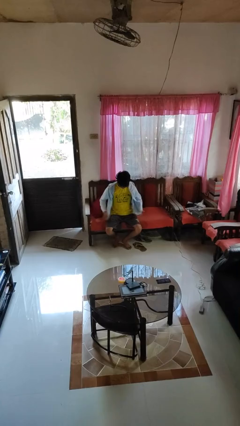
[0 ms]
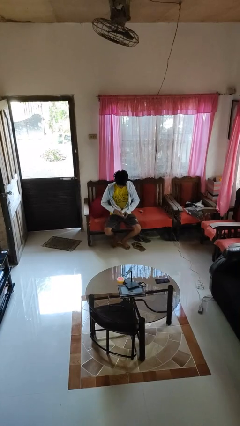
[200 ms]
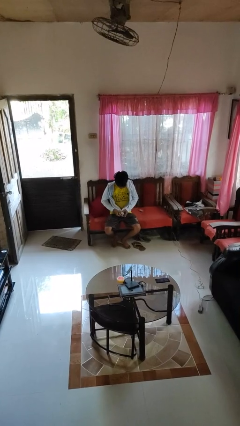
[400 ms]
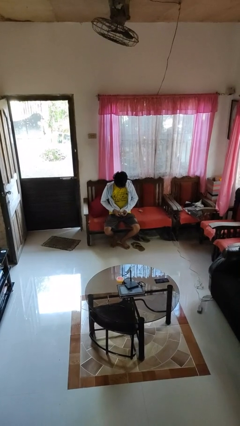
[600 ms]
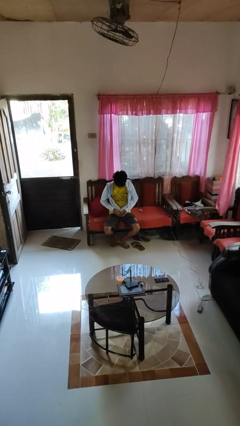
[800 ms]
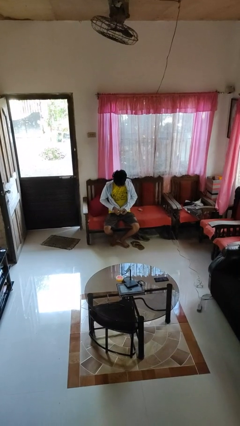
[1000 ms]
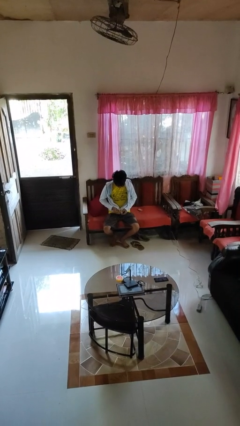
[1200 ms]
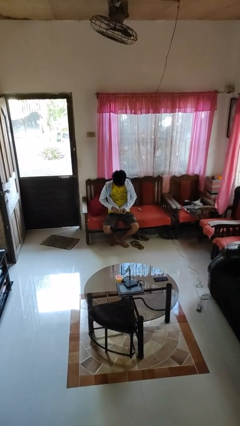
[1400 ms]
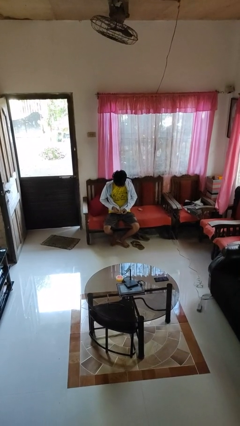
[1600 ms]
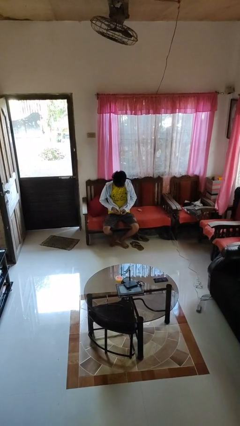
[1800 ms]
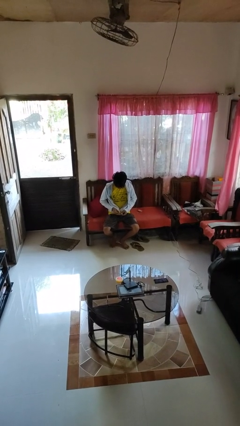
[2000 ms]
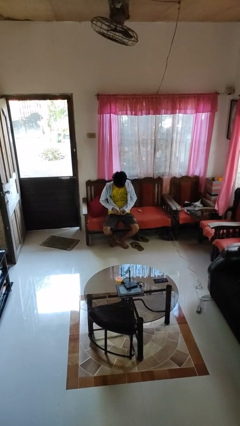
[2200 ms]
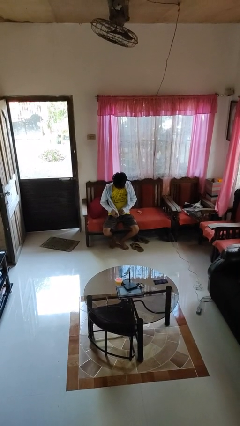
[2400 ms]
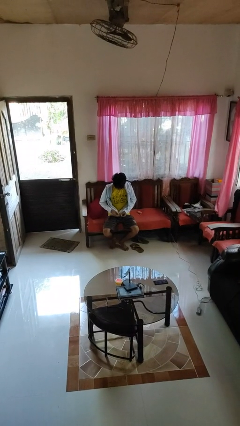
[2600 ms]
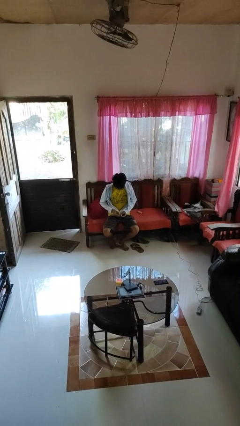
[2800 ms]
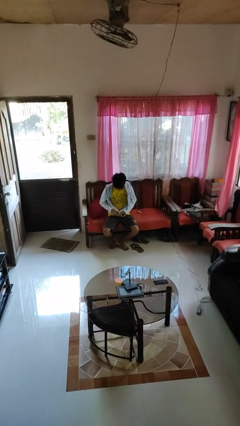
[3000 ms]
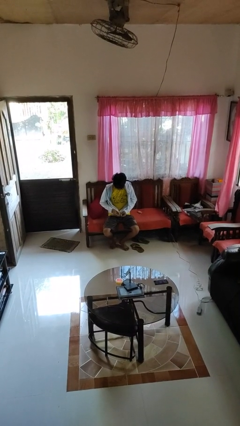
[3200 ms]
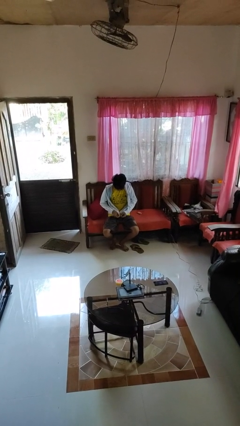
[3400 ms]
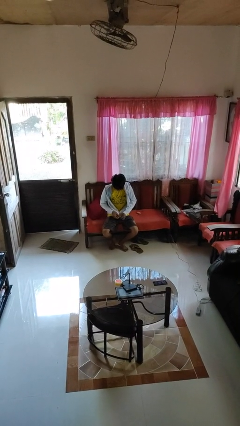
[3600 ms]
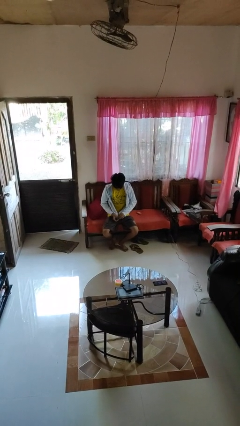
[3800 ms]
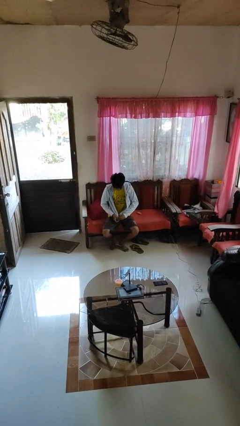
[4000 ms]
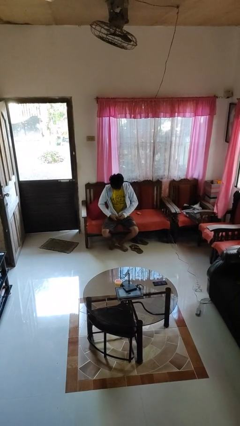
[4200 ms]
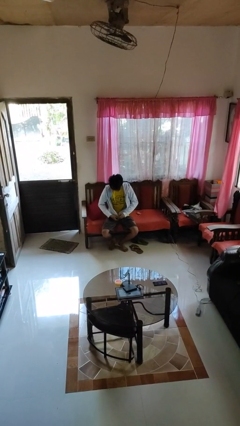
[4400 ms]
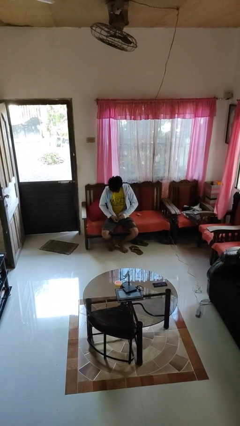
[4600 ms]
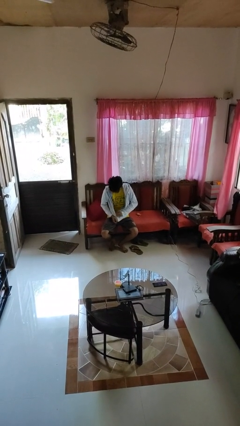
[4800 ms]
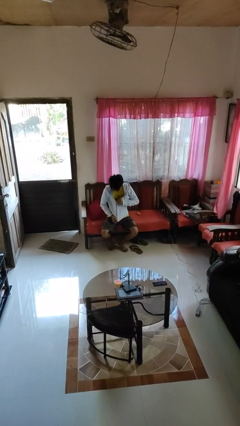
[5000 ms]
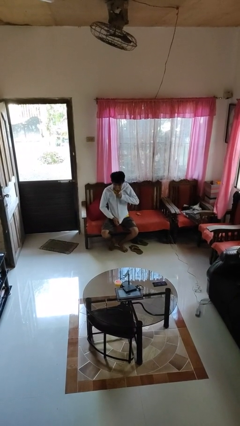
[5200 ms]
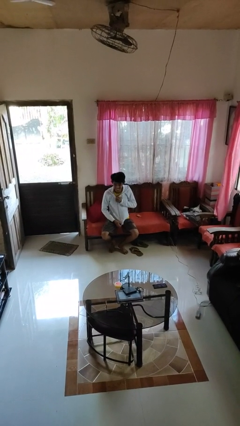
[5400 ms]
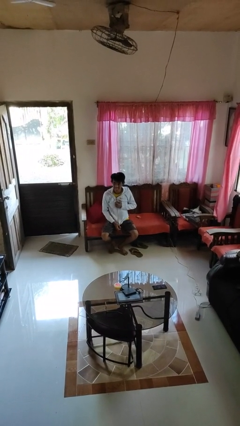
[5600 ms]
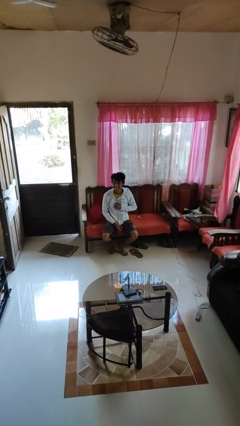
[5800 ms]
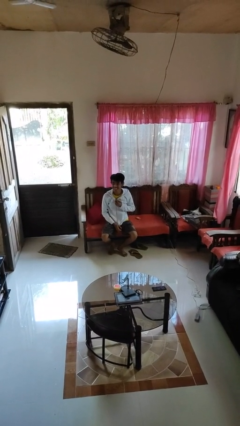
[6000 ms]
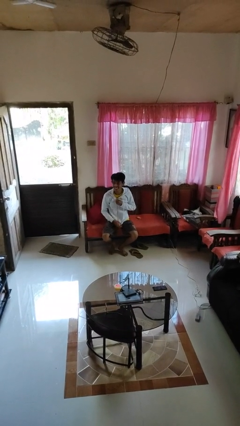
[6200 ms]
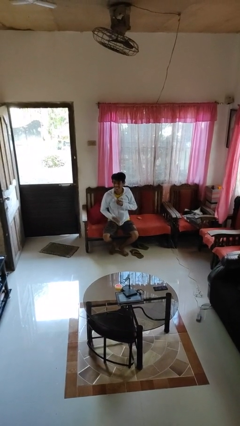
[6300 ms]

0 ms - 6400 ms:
person zips up jacket

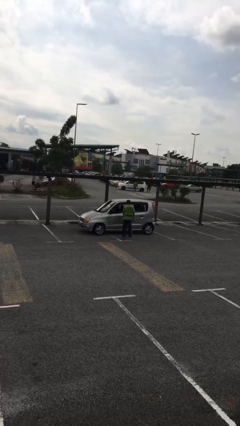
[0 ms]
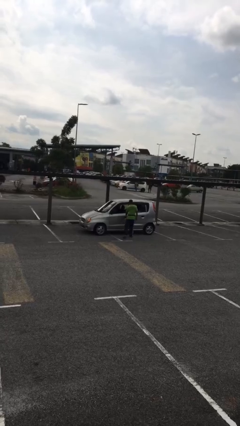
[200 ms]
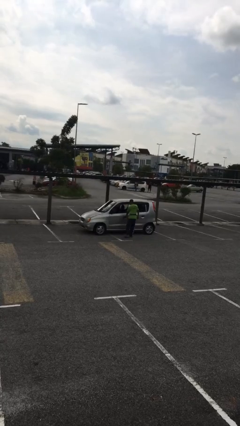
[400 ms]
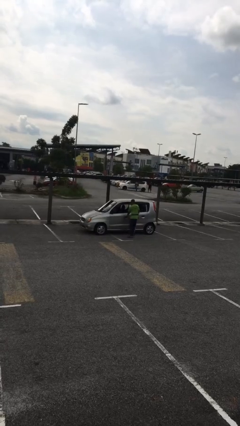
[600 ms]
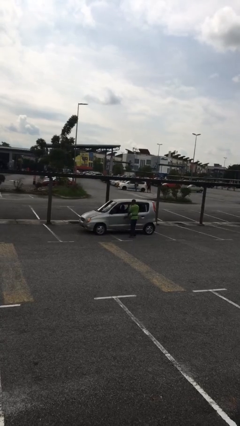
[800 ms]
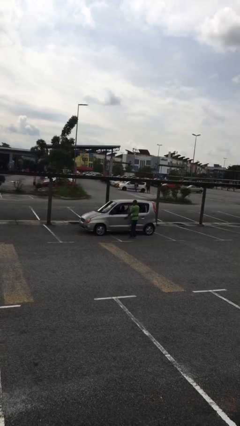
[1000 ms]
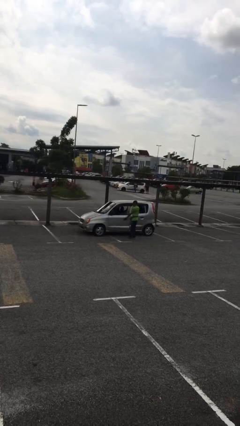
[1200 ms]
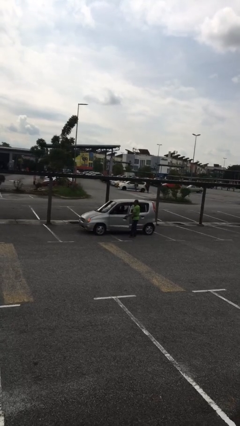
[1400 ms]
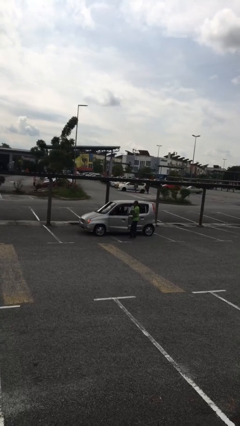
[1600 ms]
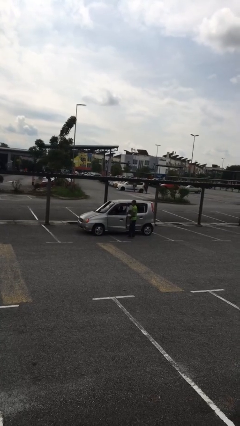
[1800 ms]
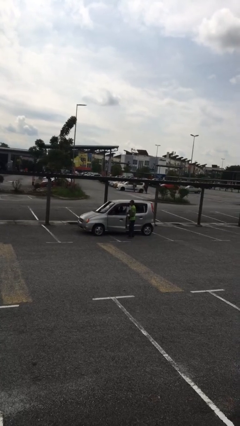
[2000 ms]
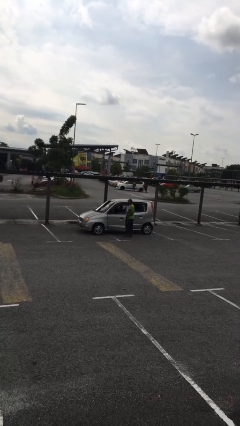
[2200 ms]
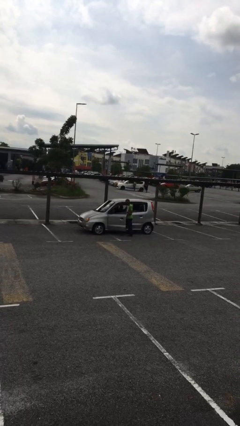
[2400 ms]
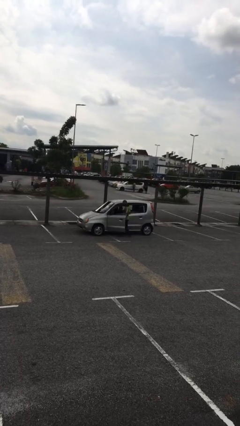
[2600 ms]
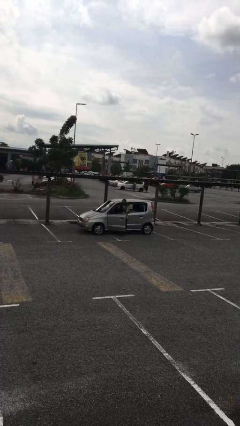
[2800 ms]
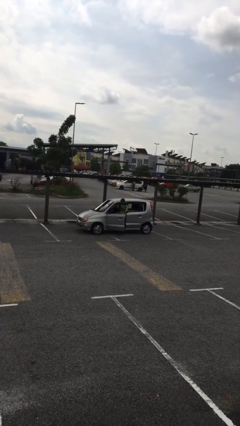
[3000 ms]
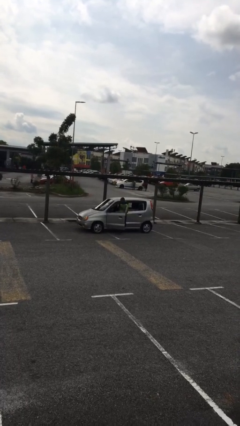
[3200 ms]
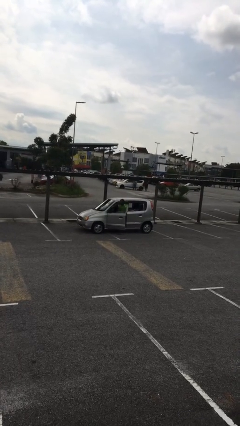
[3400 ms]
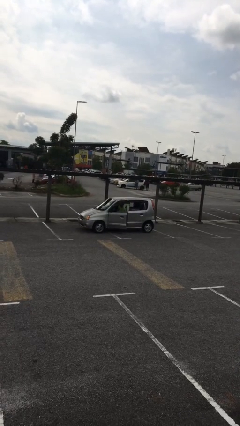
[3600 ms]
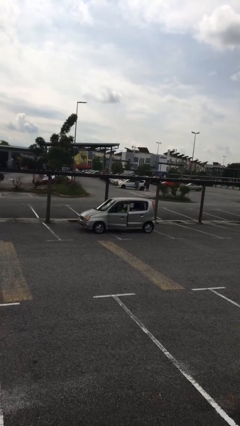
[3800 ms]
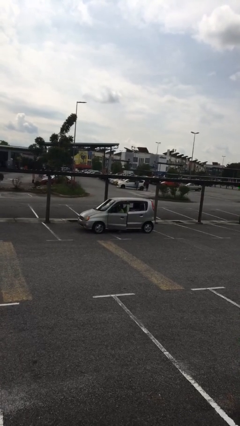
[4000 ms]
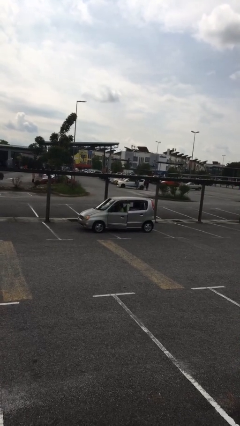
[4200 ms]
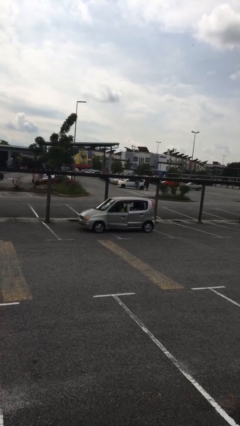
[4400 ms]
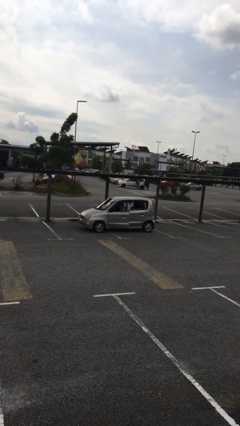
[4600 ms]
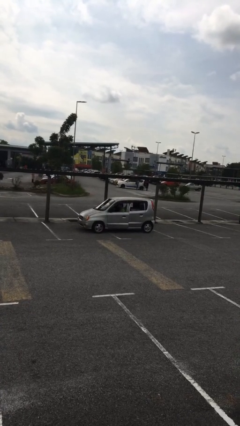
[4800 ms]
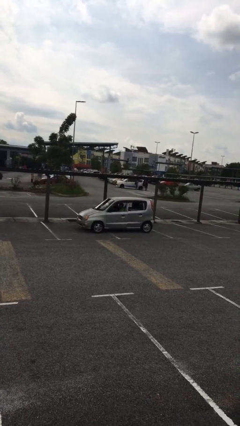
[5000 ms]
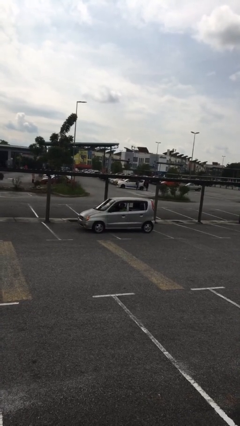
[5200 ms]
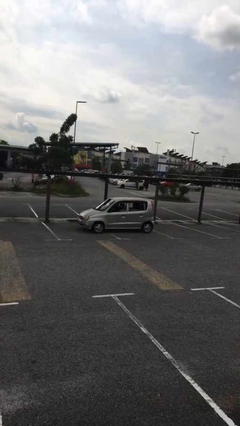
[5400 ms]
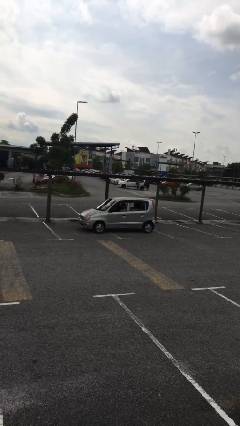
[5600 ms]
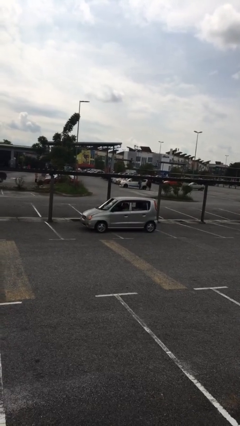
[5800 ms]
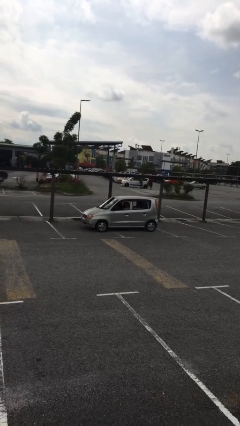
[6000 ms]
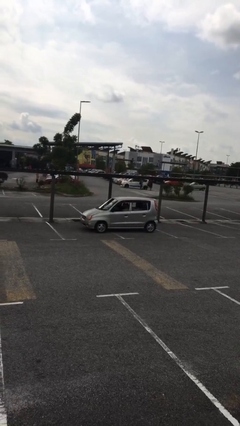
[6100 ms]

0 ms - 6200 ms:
car picks up person

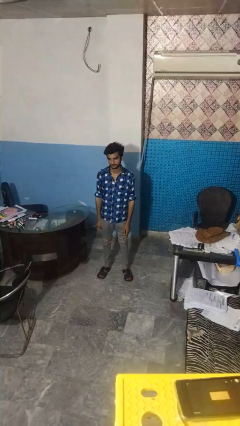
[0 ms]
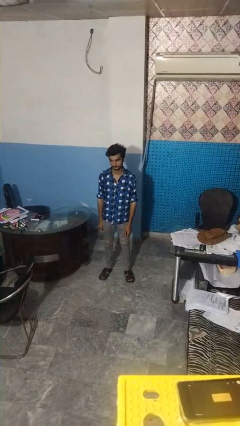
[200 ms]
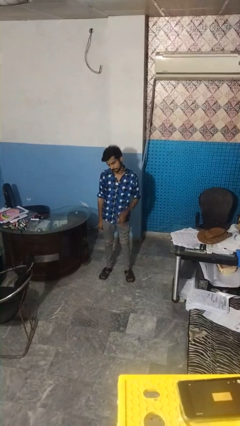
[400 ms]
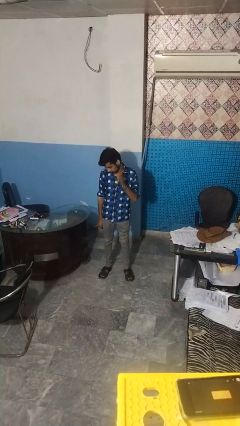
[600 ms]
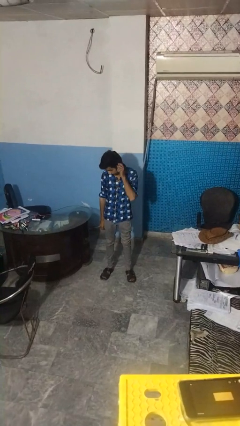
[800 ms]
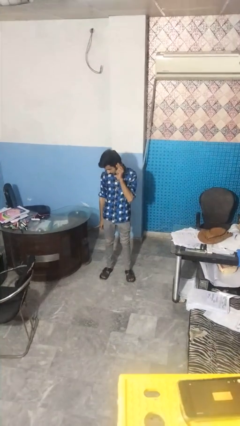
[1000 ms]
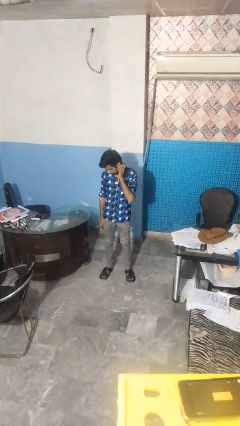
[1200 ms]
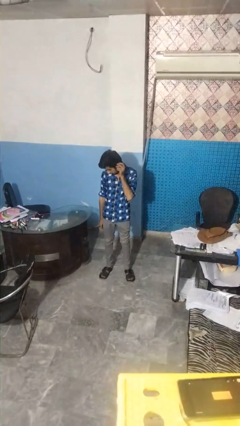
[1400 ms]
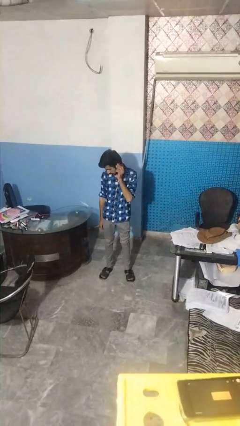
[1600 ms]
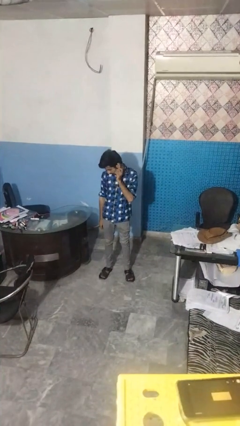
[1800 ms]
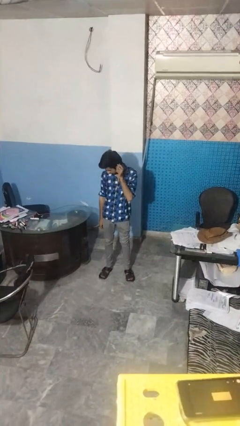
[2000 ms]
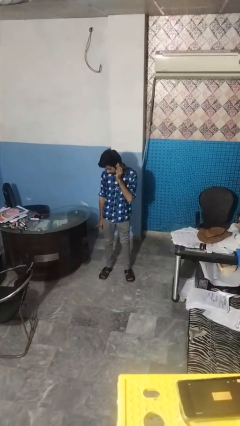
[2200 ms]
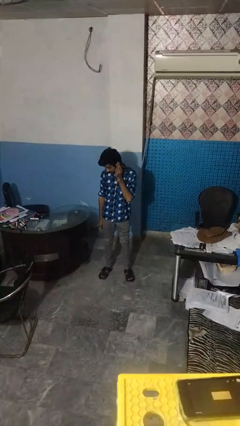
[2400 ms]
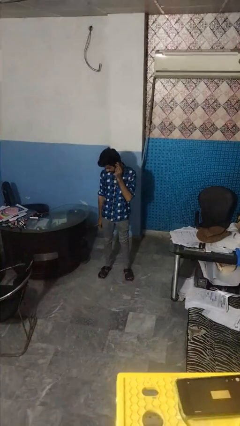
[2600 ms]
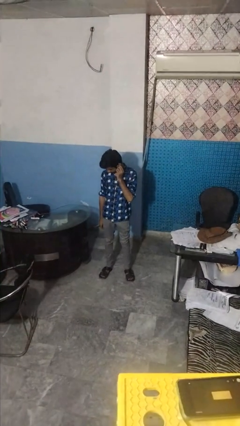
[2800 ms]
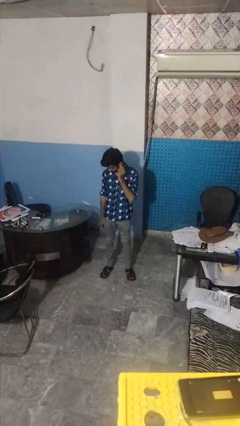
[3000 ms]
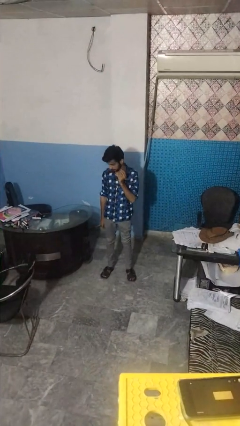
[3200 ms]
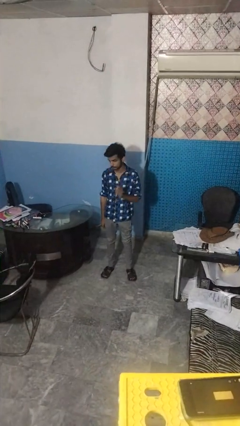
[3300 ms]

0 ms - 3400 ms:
person touches earlobe

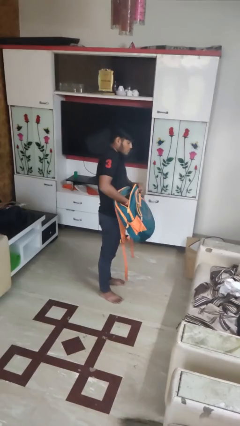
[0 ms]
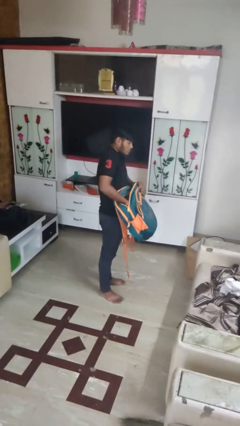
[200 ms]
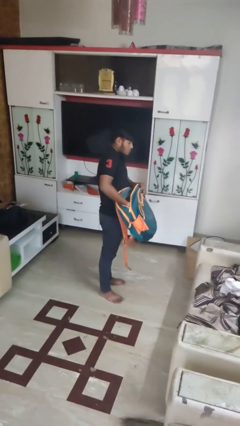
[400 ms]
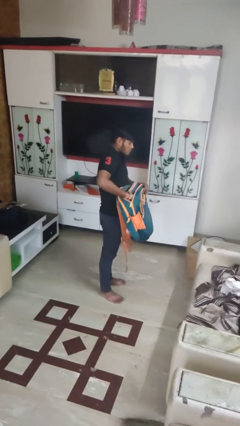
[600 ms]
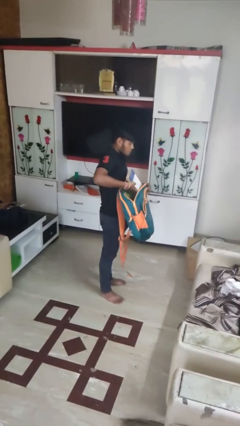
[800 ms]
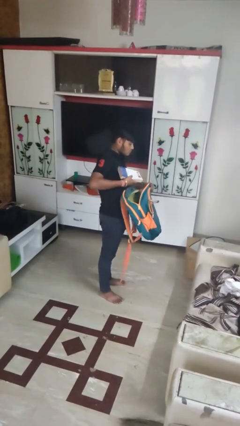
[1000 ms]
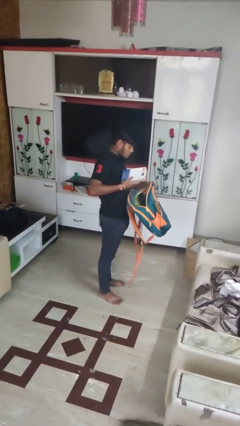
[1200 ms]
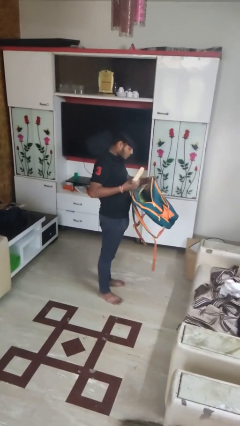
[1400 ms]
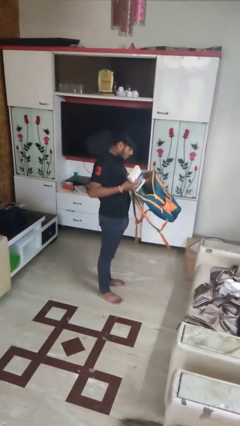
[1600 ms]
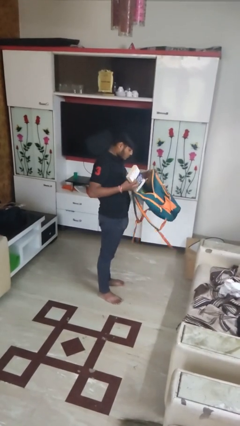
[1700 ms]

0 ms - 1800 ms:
person takes object from backpack
